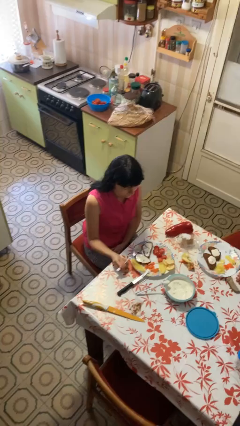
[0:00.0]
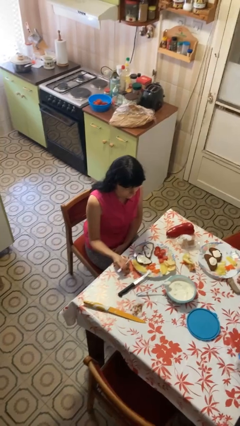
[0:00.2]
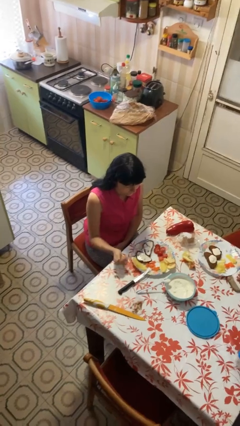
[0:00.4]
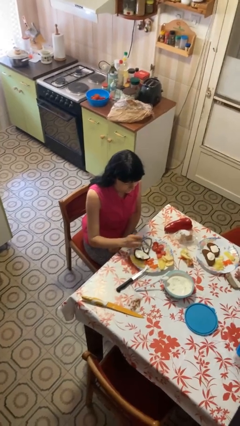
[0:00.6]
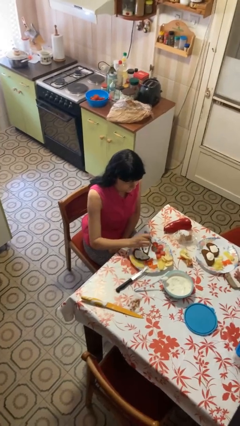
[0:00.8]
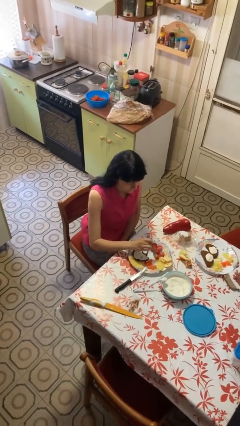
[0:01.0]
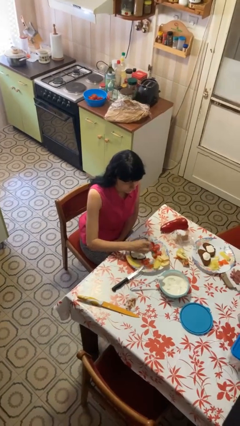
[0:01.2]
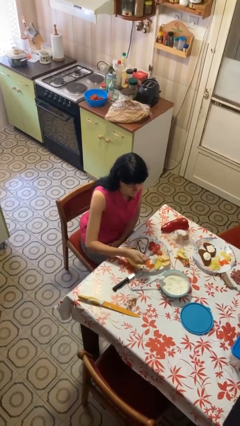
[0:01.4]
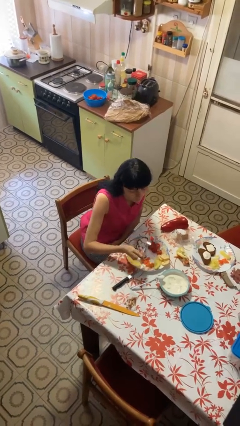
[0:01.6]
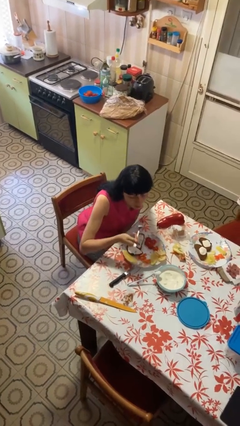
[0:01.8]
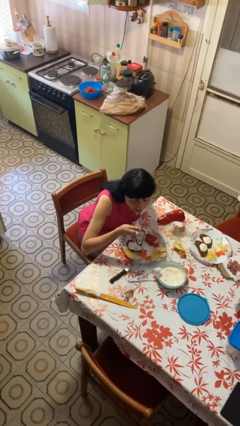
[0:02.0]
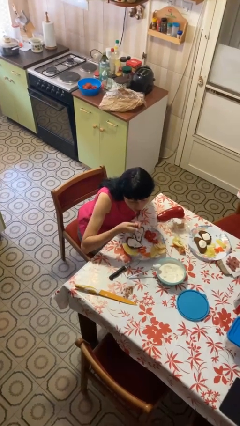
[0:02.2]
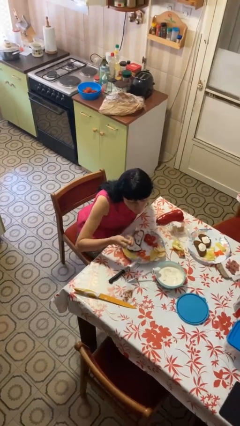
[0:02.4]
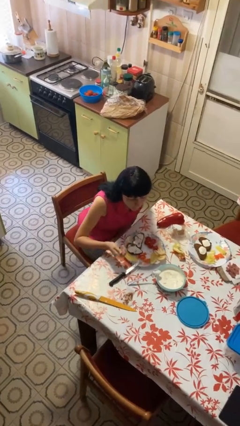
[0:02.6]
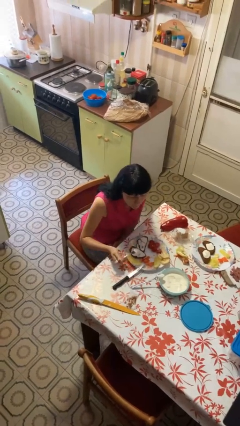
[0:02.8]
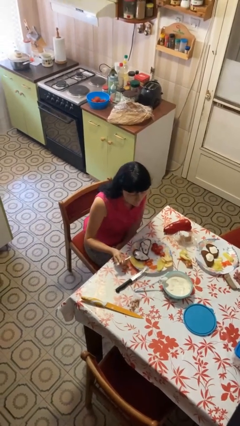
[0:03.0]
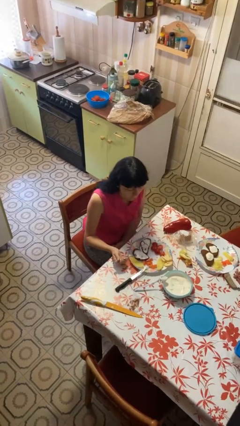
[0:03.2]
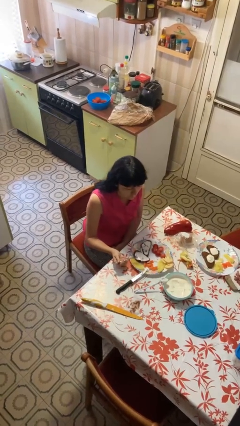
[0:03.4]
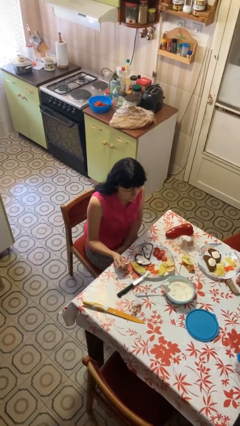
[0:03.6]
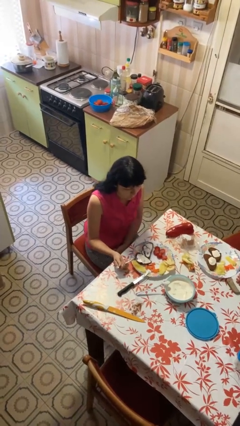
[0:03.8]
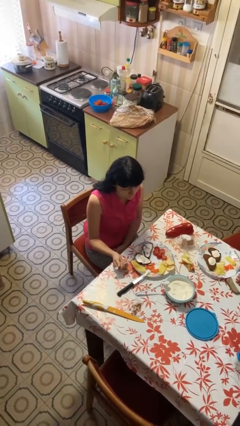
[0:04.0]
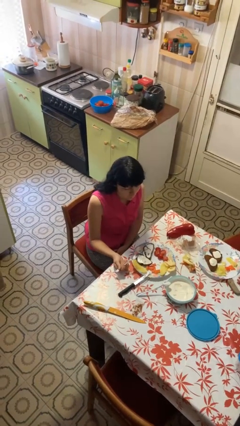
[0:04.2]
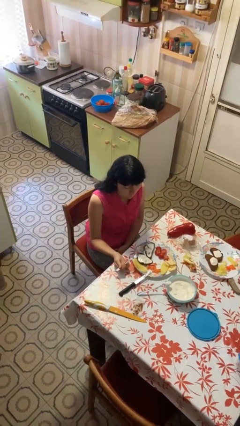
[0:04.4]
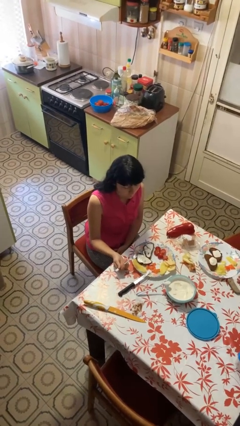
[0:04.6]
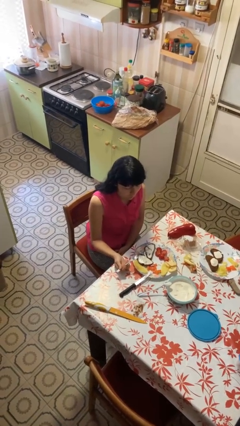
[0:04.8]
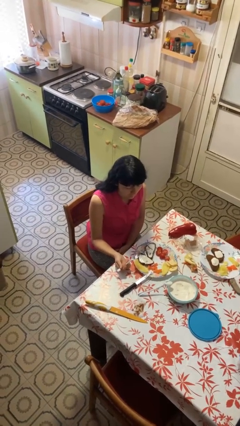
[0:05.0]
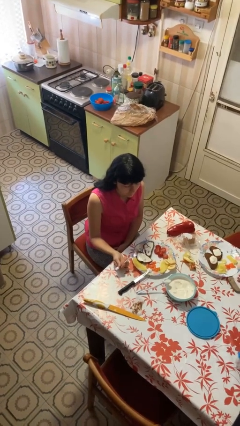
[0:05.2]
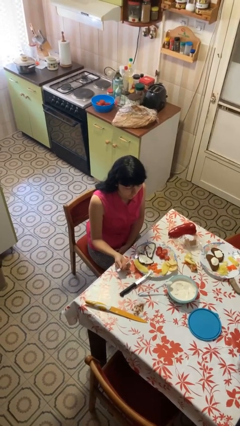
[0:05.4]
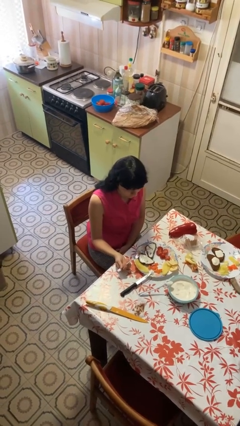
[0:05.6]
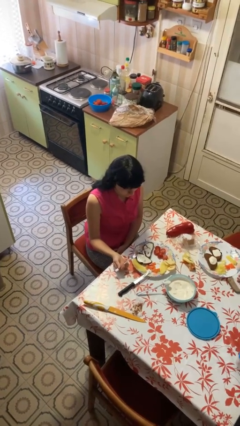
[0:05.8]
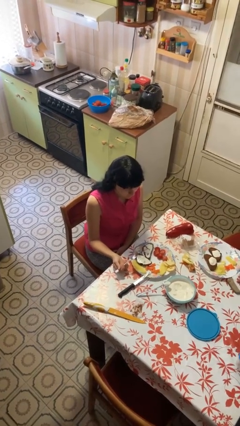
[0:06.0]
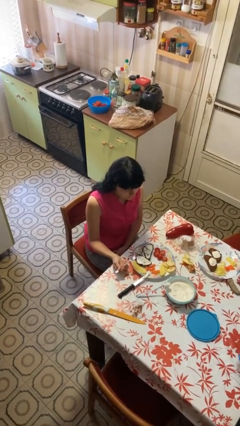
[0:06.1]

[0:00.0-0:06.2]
person eats with utensil

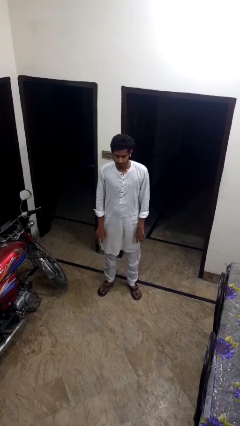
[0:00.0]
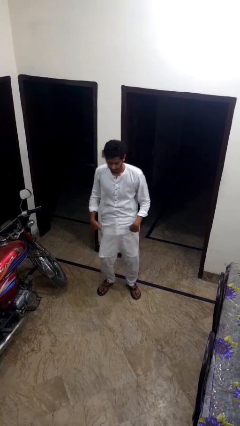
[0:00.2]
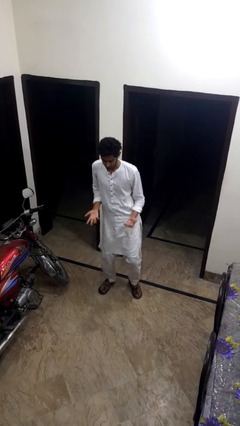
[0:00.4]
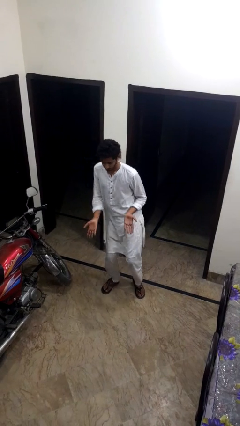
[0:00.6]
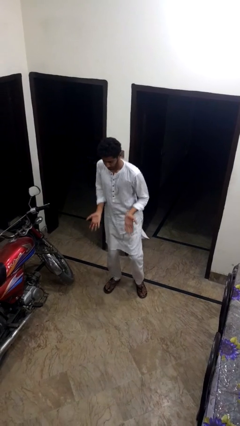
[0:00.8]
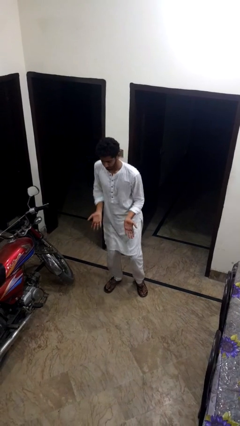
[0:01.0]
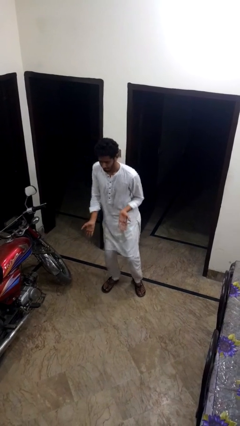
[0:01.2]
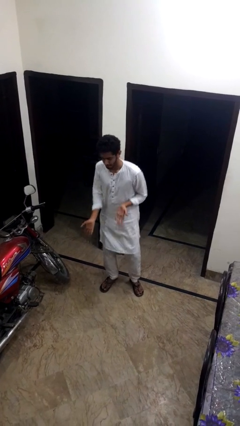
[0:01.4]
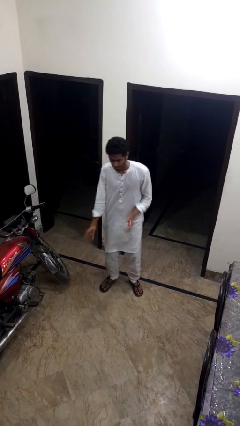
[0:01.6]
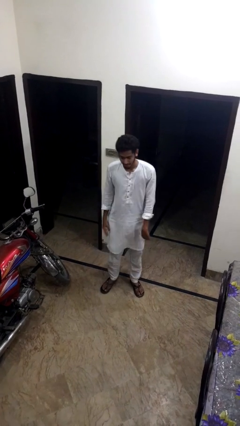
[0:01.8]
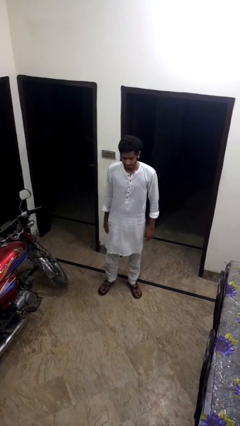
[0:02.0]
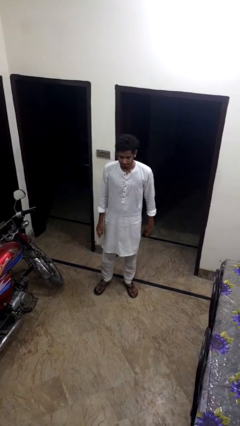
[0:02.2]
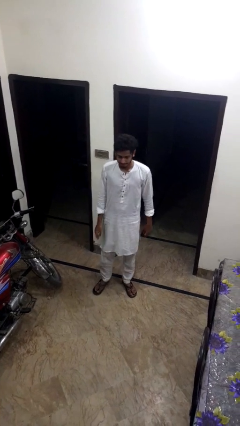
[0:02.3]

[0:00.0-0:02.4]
person dances in place

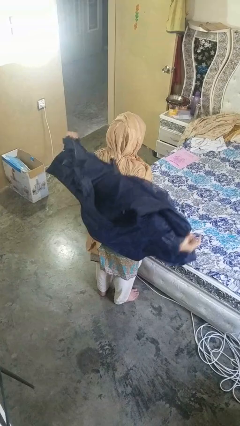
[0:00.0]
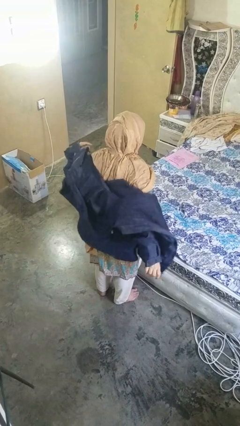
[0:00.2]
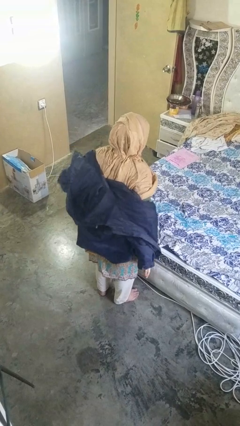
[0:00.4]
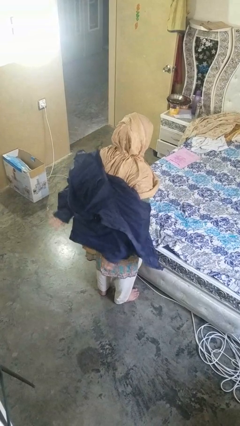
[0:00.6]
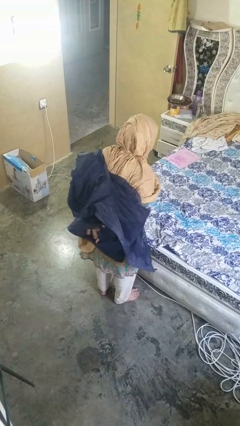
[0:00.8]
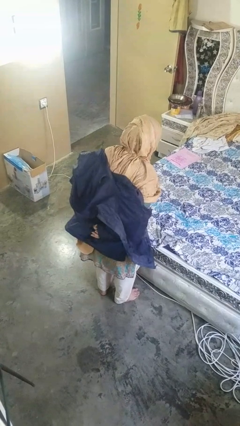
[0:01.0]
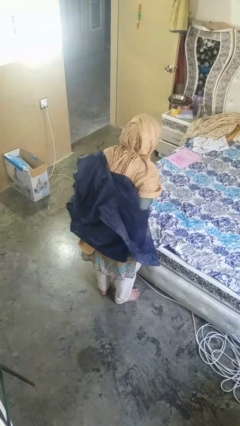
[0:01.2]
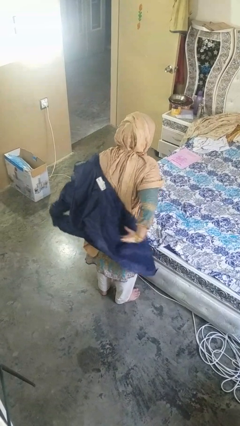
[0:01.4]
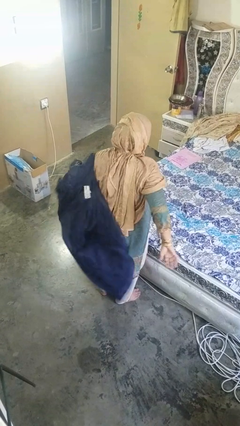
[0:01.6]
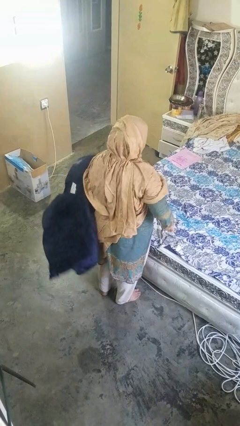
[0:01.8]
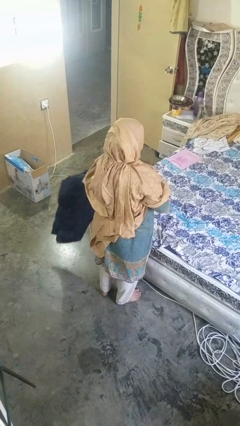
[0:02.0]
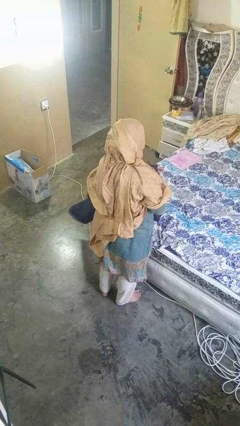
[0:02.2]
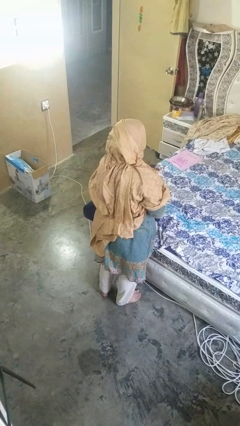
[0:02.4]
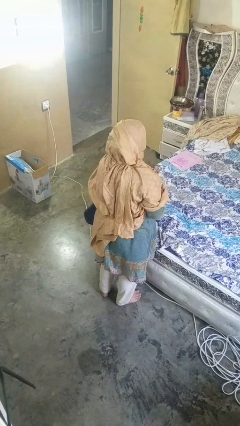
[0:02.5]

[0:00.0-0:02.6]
person takes off jacket

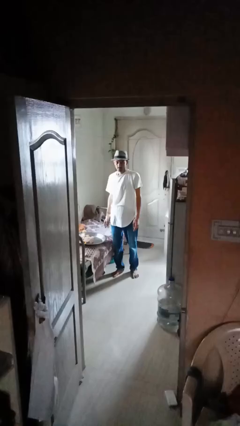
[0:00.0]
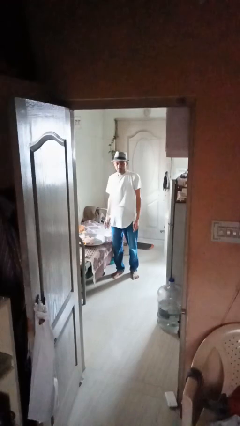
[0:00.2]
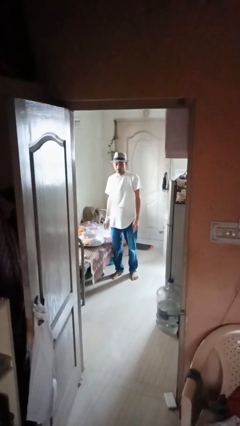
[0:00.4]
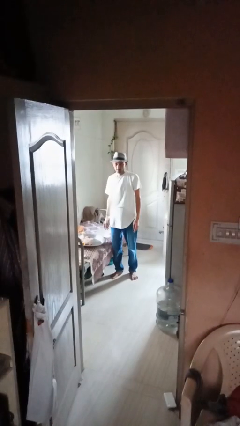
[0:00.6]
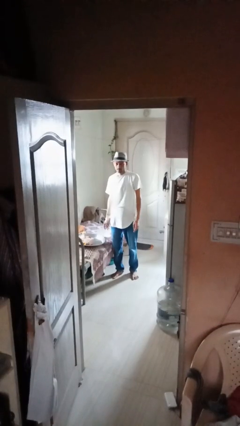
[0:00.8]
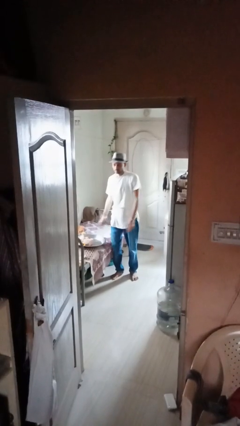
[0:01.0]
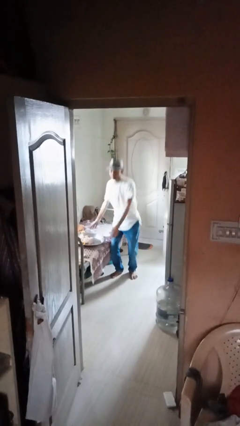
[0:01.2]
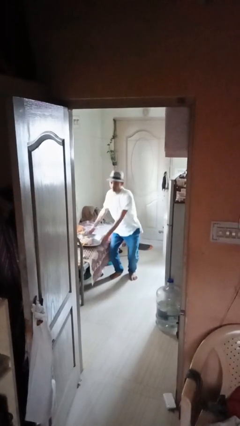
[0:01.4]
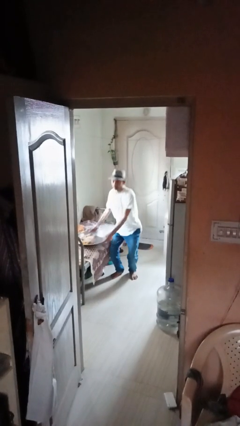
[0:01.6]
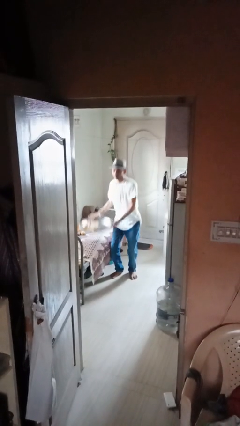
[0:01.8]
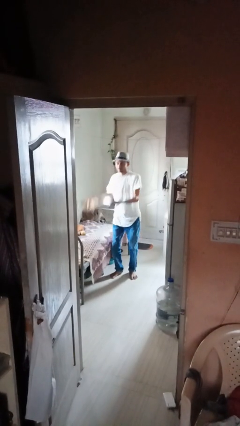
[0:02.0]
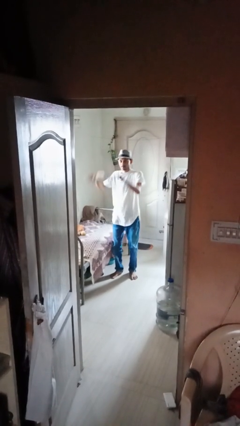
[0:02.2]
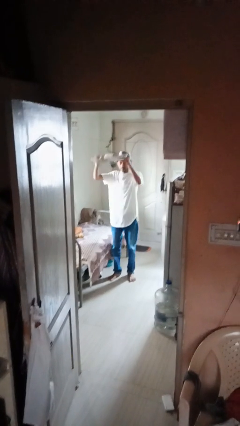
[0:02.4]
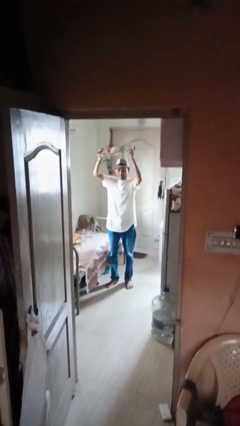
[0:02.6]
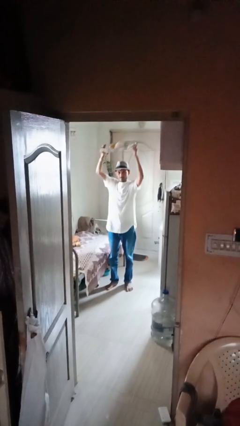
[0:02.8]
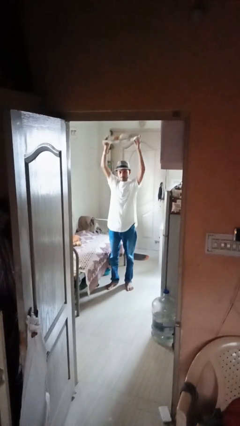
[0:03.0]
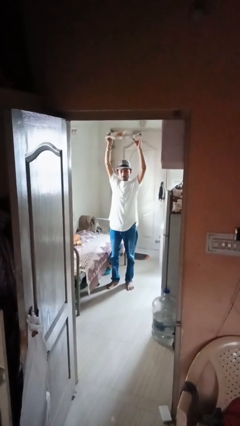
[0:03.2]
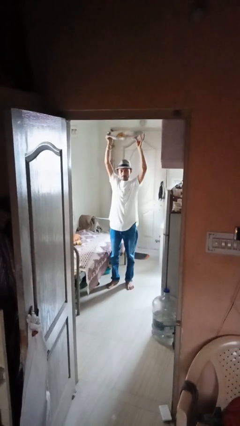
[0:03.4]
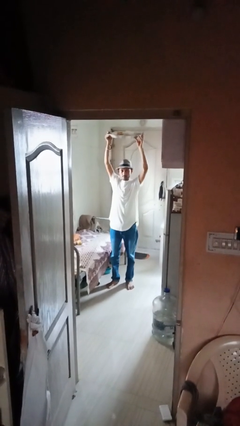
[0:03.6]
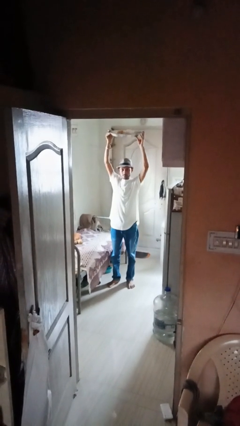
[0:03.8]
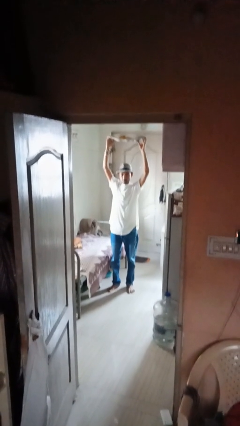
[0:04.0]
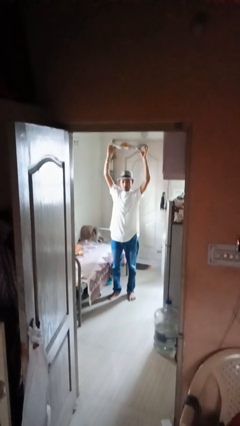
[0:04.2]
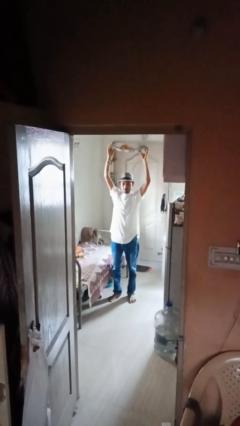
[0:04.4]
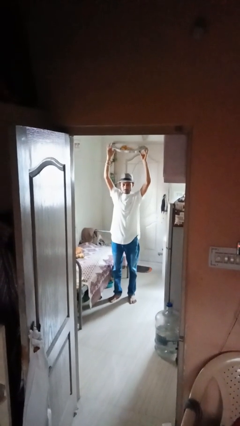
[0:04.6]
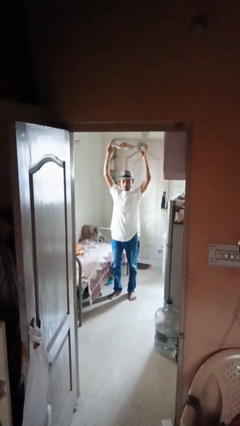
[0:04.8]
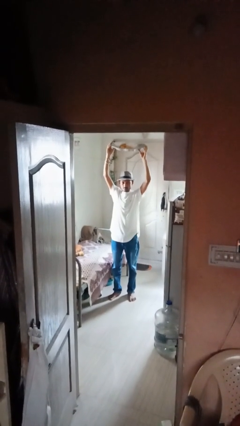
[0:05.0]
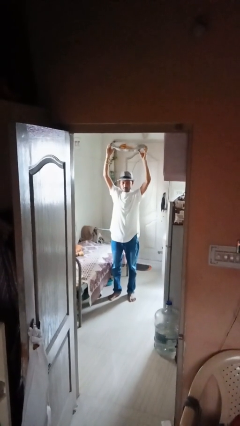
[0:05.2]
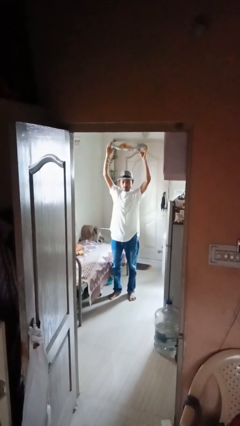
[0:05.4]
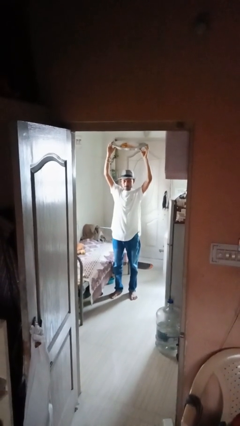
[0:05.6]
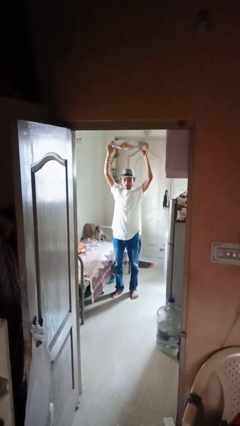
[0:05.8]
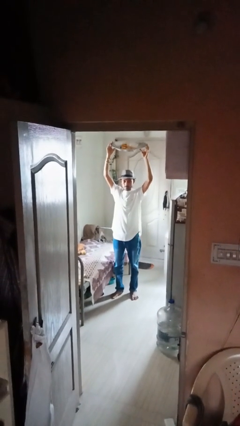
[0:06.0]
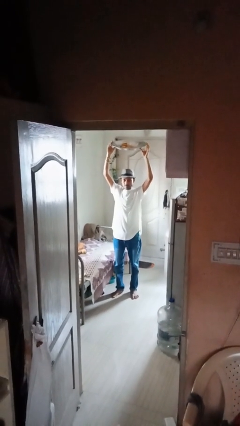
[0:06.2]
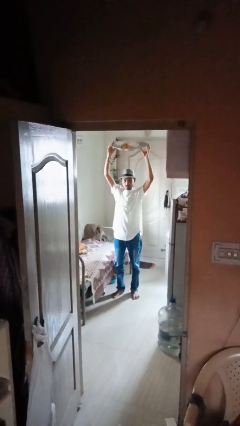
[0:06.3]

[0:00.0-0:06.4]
person holds object above head

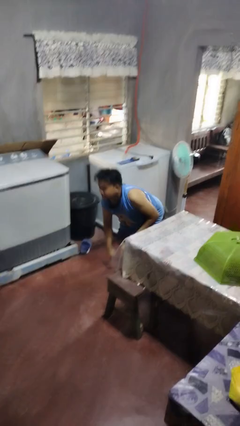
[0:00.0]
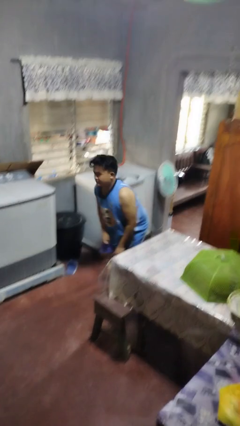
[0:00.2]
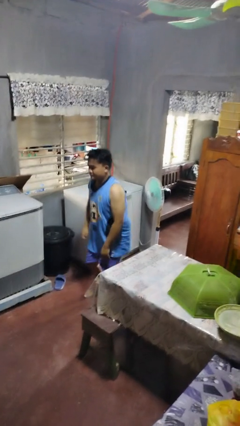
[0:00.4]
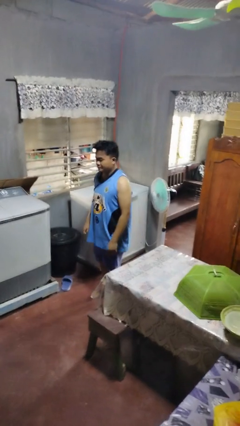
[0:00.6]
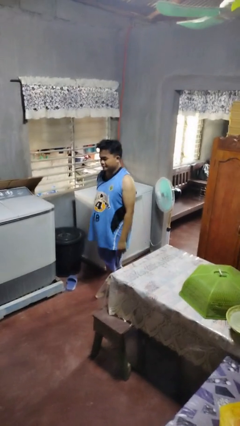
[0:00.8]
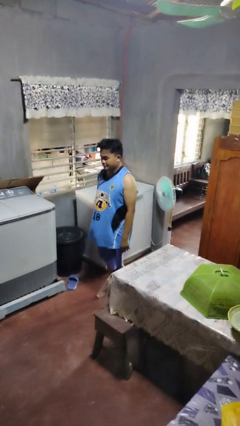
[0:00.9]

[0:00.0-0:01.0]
person stands up from floor
